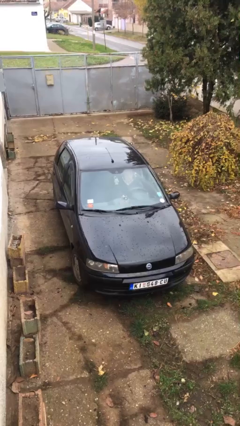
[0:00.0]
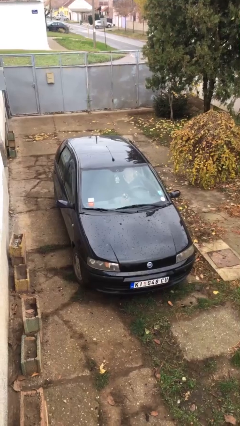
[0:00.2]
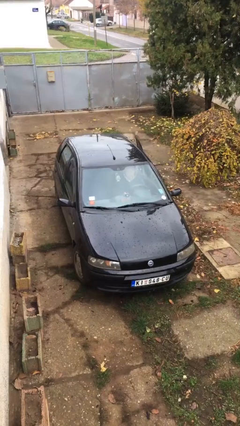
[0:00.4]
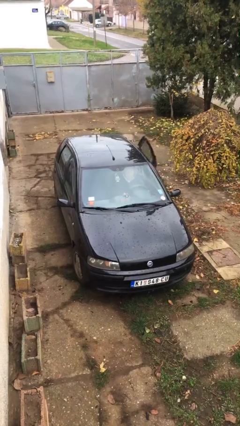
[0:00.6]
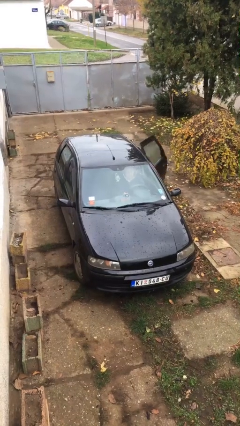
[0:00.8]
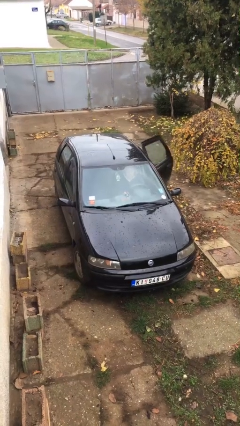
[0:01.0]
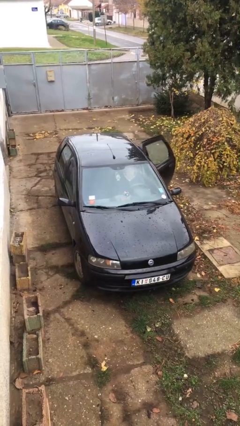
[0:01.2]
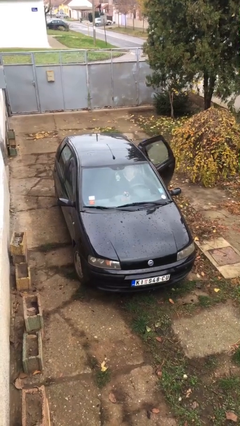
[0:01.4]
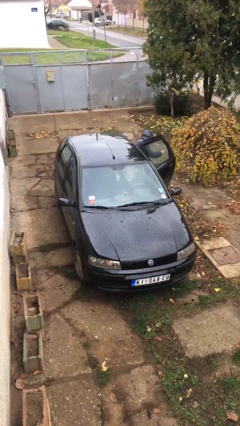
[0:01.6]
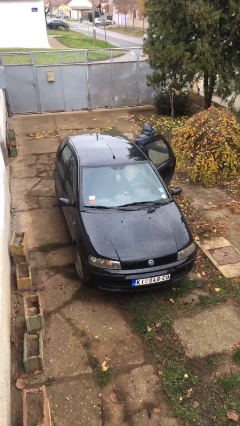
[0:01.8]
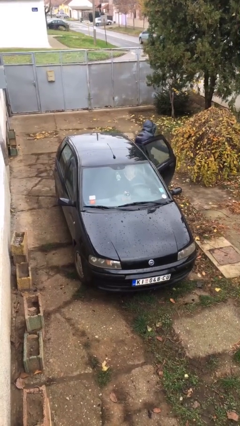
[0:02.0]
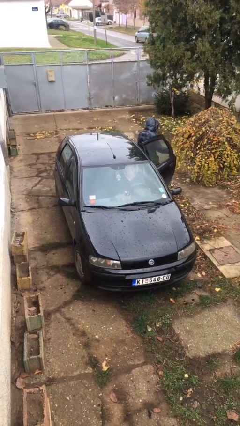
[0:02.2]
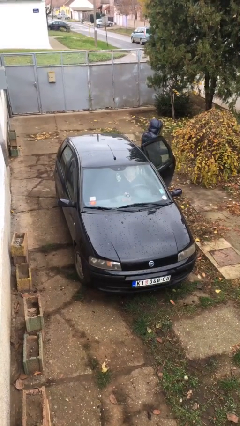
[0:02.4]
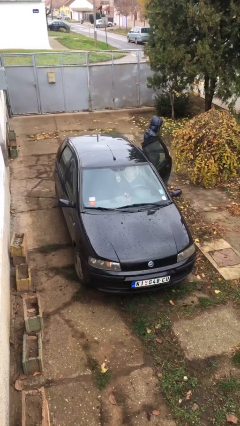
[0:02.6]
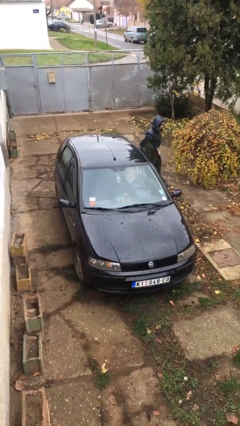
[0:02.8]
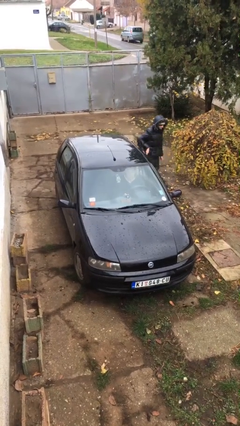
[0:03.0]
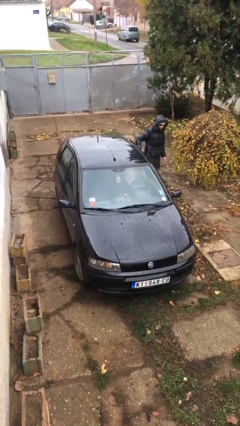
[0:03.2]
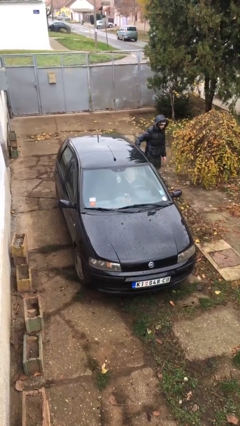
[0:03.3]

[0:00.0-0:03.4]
car drops off person

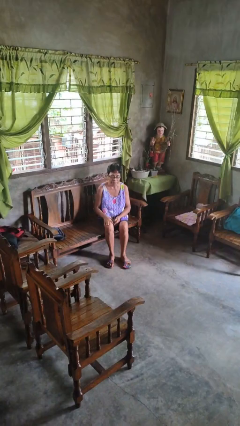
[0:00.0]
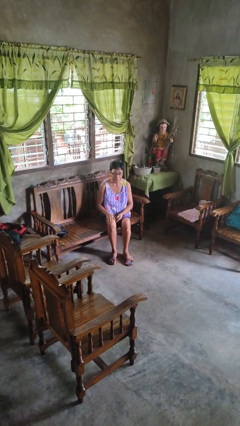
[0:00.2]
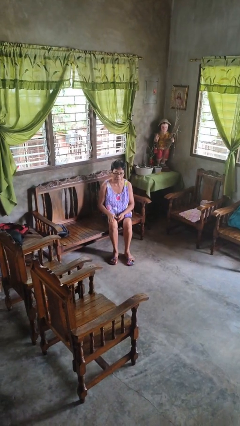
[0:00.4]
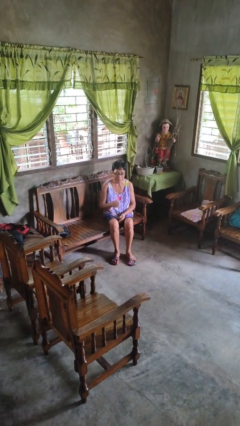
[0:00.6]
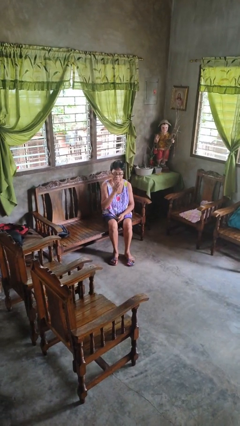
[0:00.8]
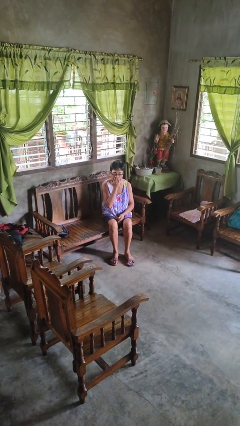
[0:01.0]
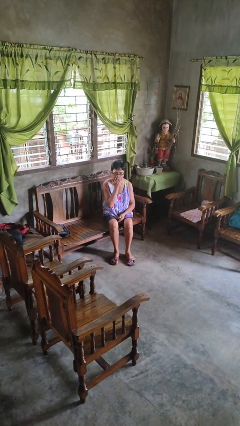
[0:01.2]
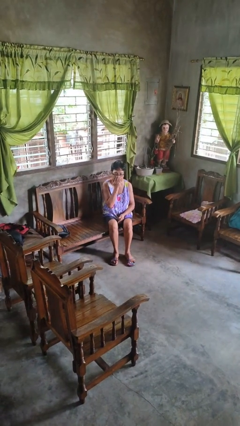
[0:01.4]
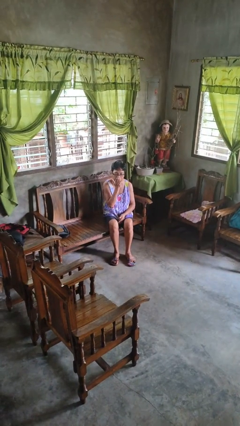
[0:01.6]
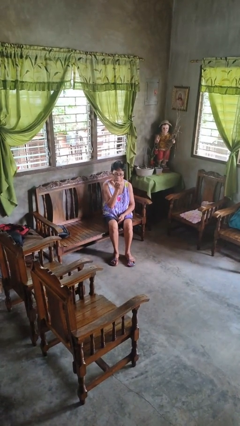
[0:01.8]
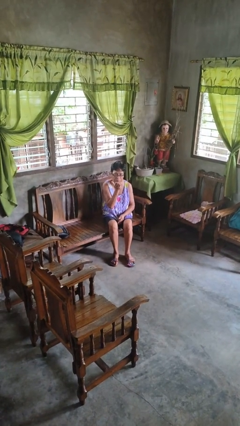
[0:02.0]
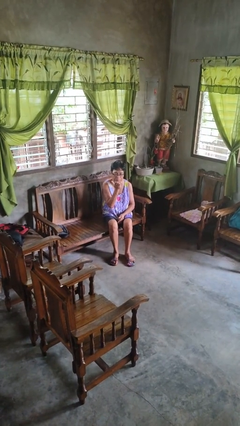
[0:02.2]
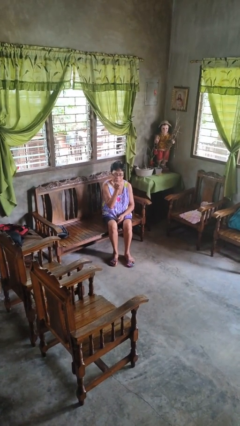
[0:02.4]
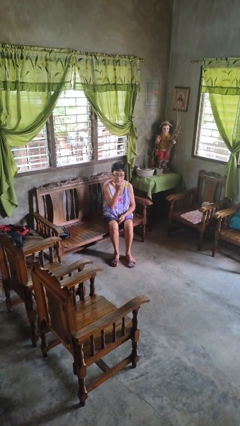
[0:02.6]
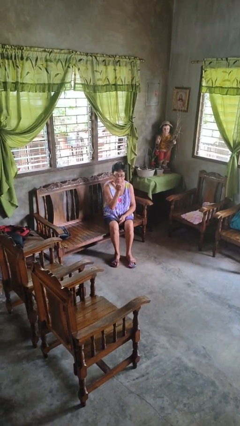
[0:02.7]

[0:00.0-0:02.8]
person gestures blow kiss

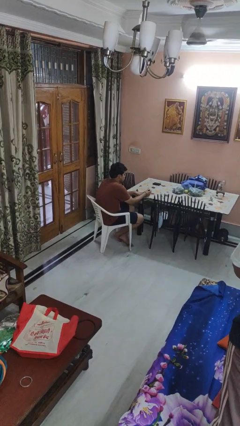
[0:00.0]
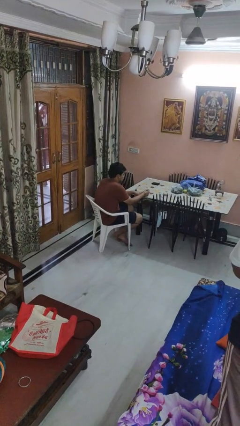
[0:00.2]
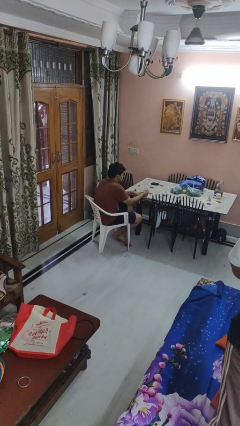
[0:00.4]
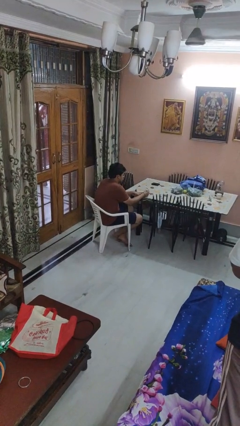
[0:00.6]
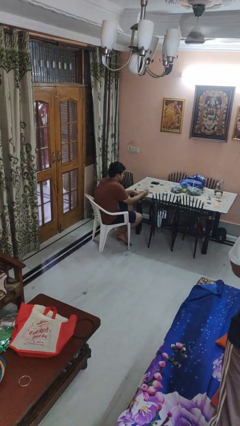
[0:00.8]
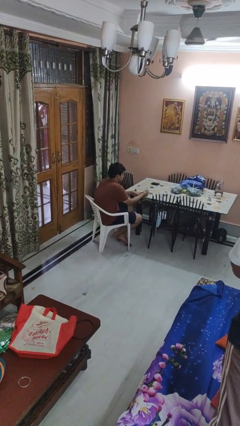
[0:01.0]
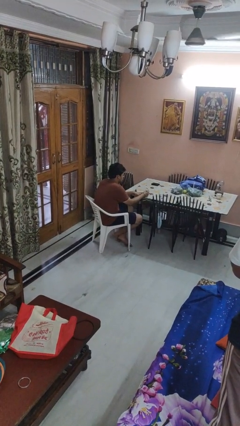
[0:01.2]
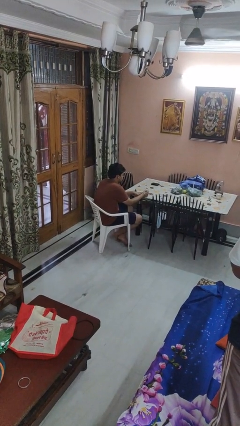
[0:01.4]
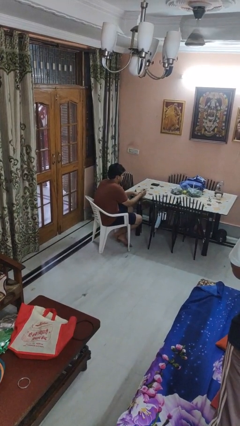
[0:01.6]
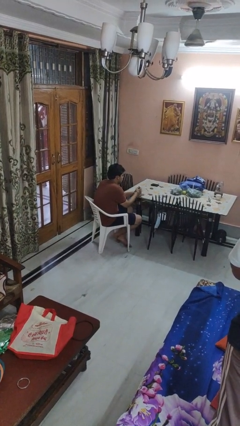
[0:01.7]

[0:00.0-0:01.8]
person paints fingernails

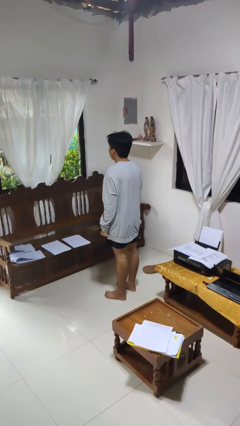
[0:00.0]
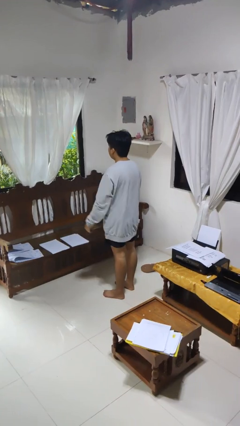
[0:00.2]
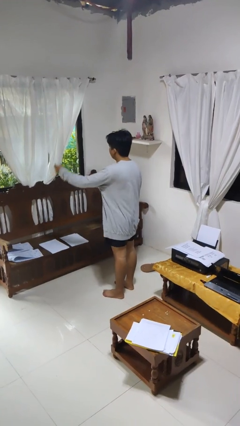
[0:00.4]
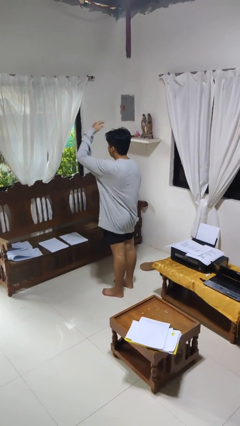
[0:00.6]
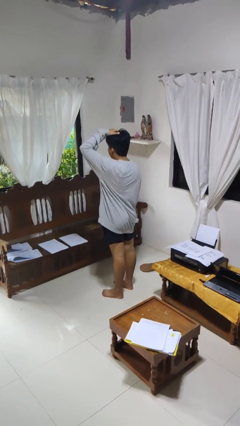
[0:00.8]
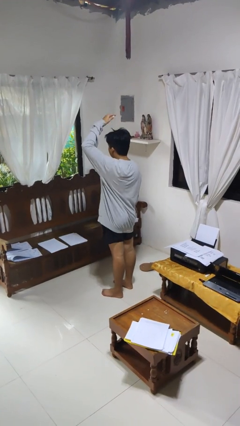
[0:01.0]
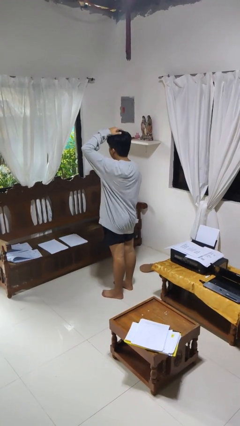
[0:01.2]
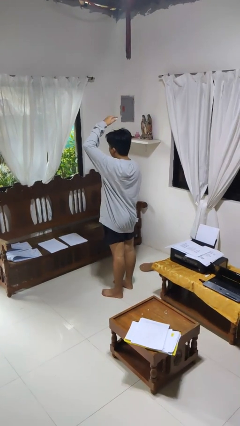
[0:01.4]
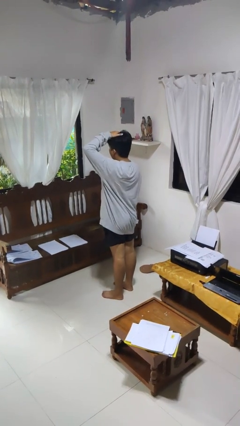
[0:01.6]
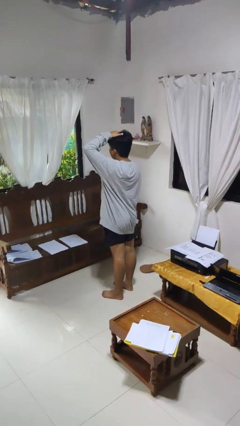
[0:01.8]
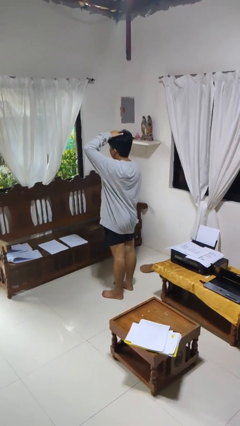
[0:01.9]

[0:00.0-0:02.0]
person pats head

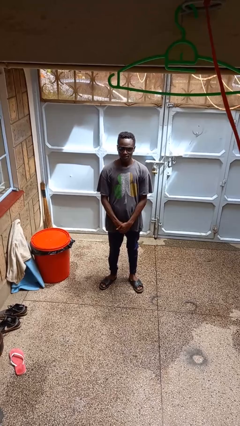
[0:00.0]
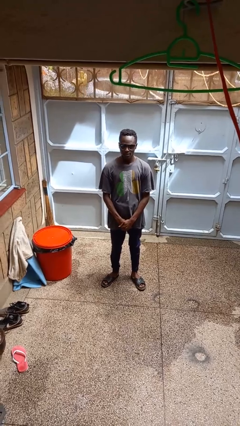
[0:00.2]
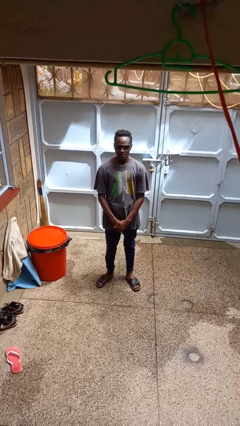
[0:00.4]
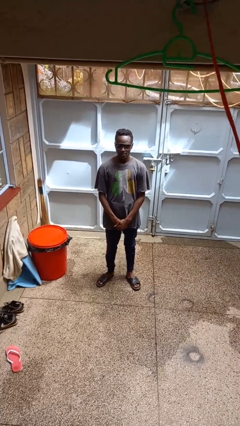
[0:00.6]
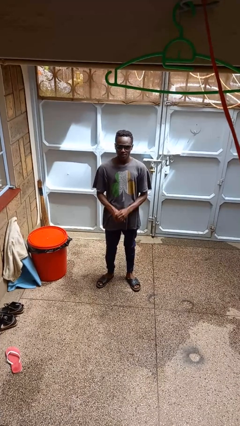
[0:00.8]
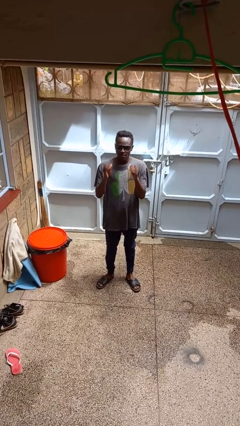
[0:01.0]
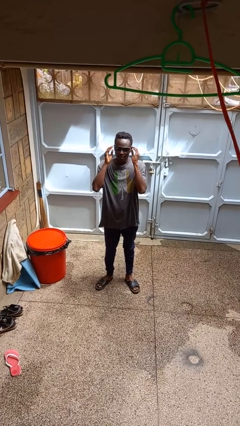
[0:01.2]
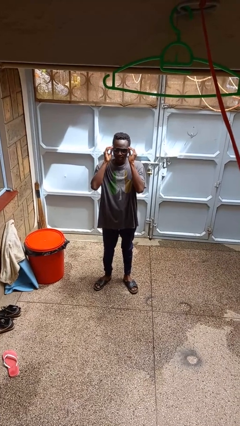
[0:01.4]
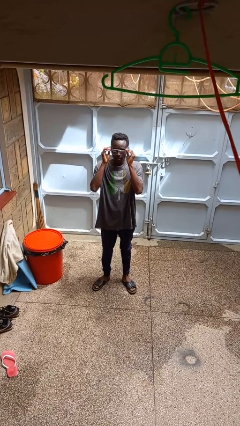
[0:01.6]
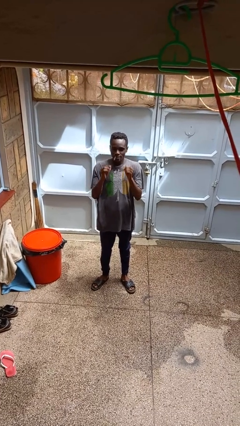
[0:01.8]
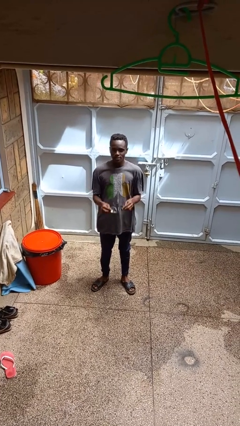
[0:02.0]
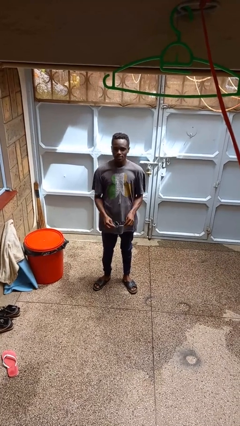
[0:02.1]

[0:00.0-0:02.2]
person takes off sunglasses

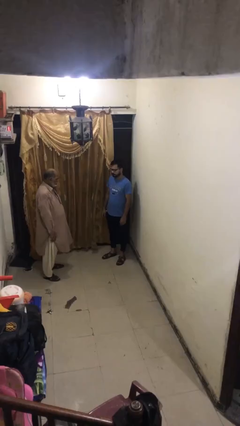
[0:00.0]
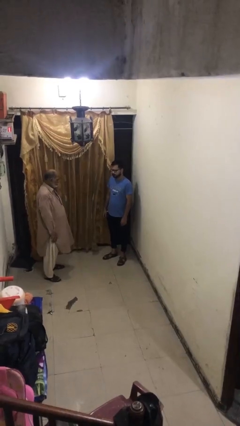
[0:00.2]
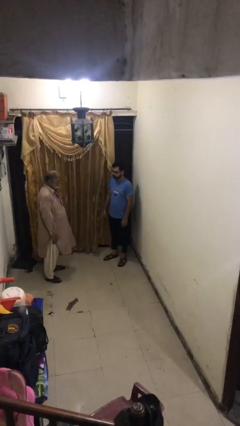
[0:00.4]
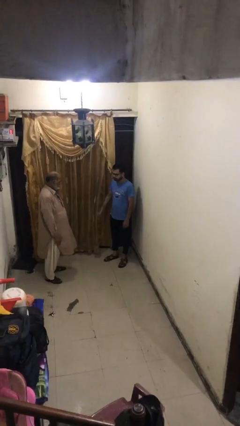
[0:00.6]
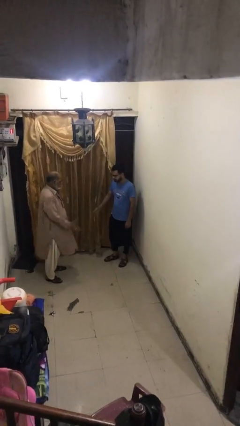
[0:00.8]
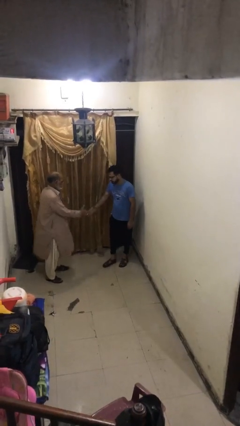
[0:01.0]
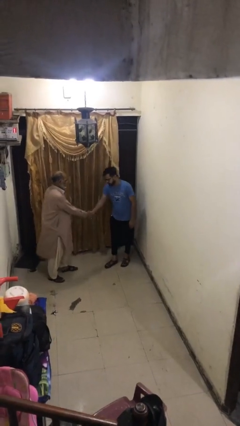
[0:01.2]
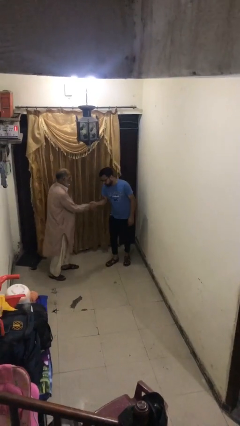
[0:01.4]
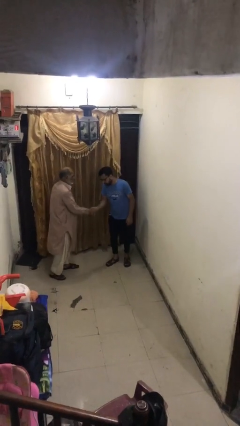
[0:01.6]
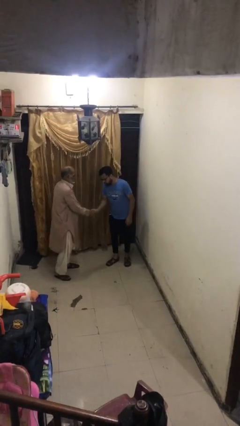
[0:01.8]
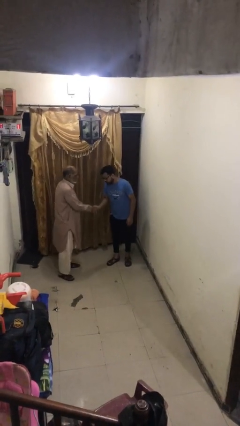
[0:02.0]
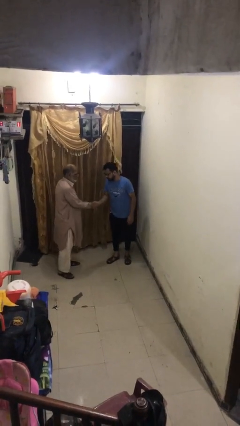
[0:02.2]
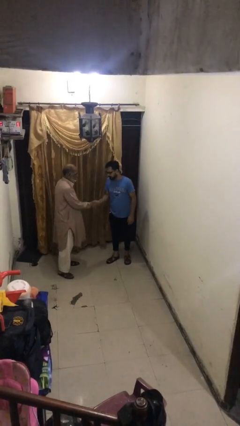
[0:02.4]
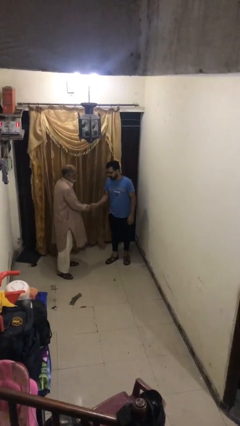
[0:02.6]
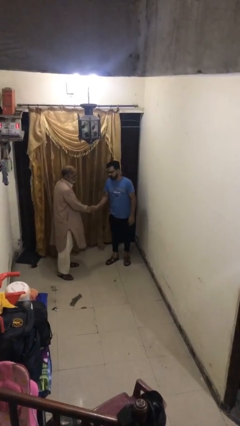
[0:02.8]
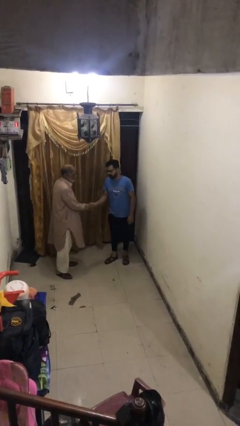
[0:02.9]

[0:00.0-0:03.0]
person shakes hand

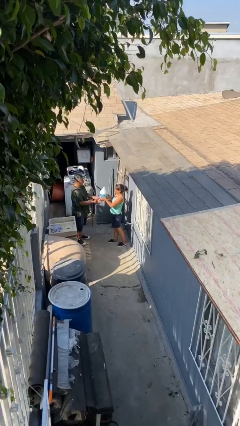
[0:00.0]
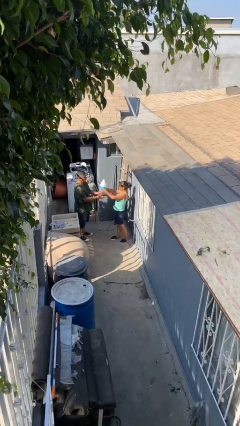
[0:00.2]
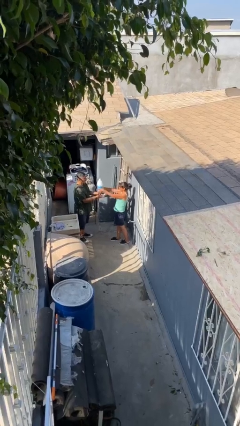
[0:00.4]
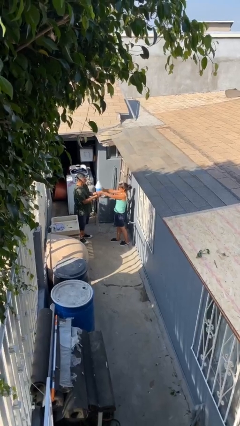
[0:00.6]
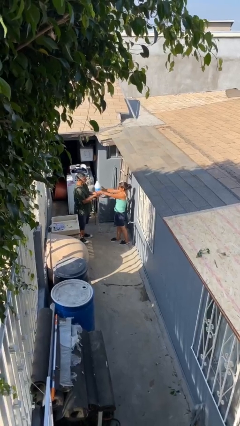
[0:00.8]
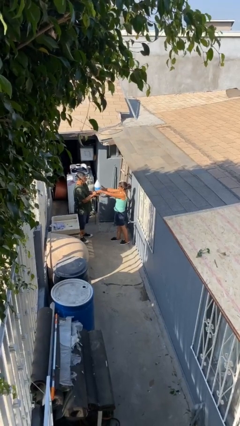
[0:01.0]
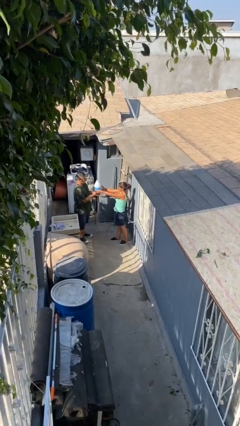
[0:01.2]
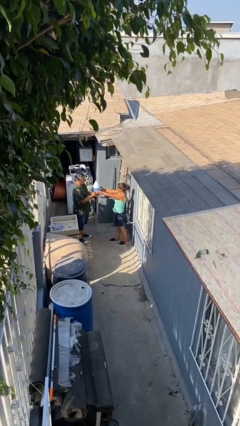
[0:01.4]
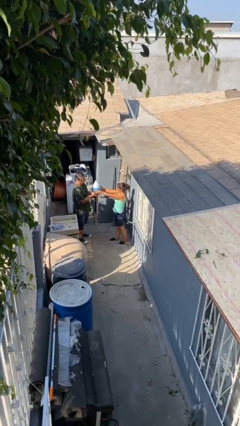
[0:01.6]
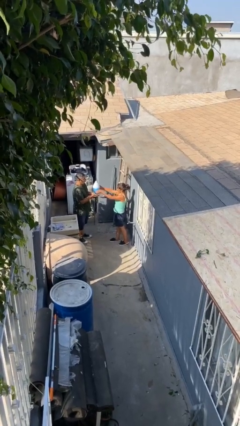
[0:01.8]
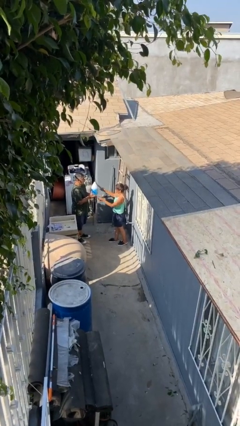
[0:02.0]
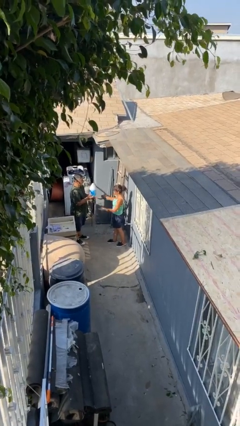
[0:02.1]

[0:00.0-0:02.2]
person transfers object to person
